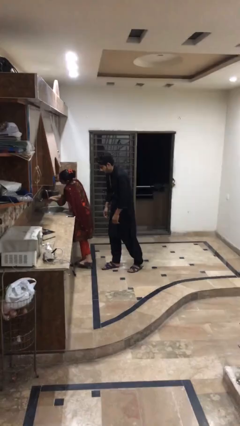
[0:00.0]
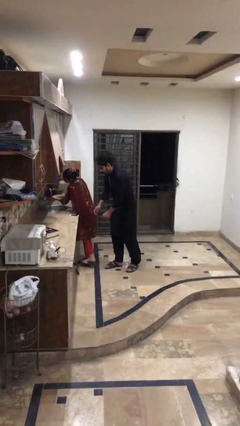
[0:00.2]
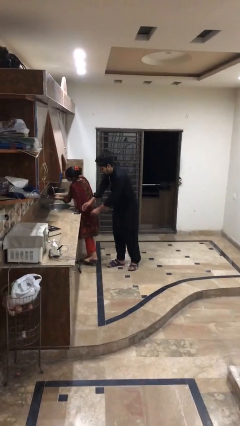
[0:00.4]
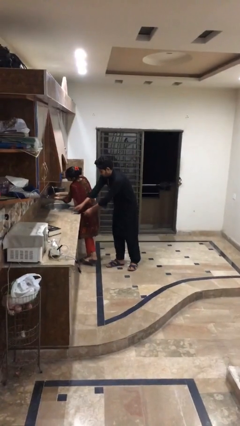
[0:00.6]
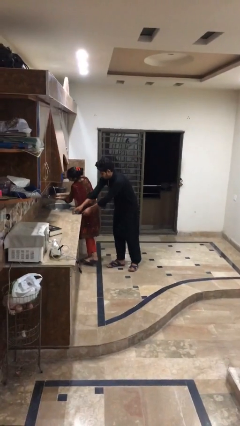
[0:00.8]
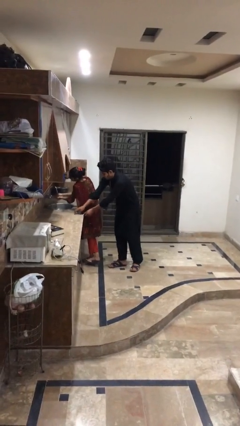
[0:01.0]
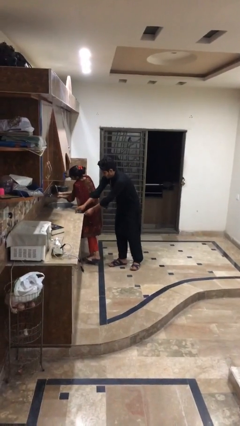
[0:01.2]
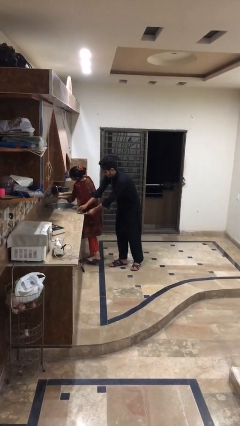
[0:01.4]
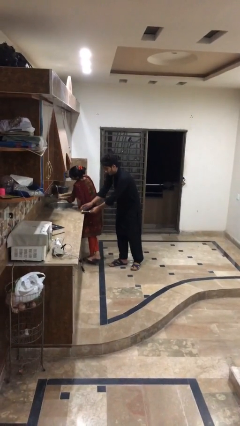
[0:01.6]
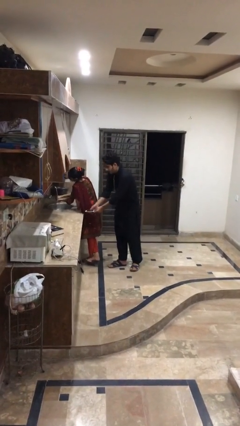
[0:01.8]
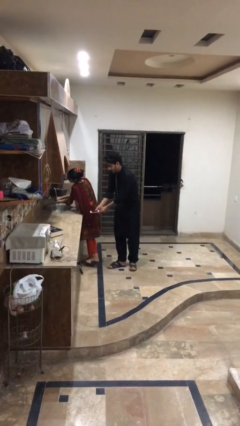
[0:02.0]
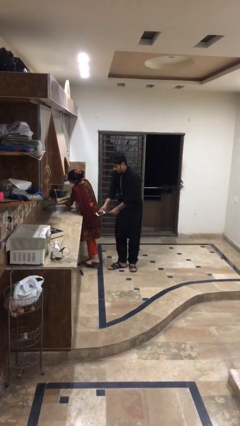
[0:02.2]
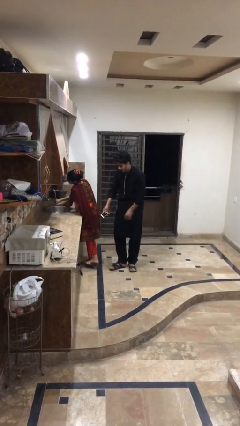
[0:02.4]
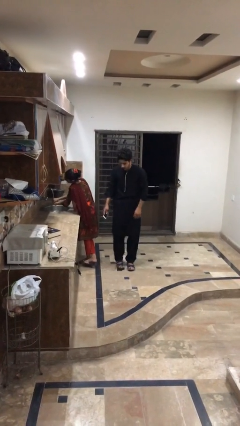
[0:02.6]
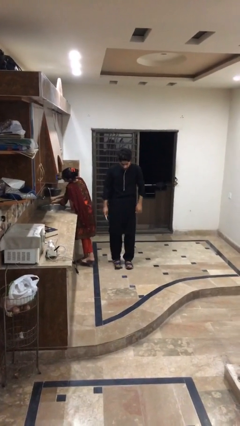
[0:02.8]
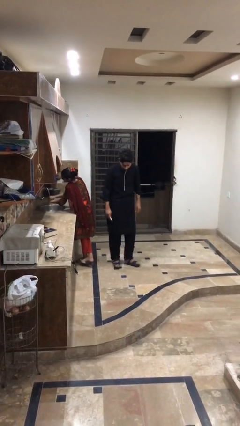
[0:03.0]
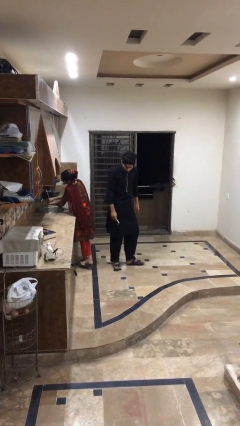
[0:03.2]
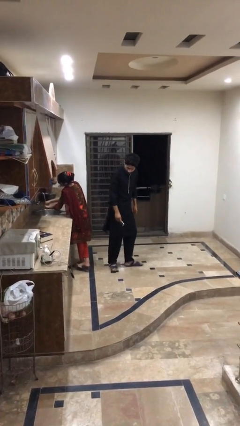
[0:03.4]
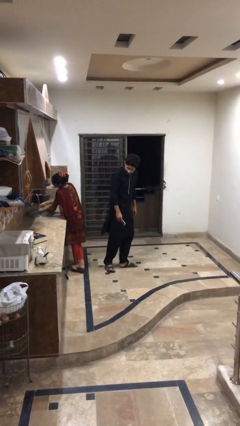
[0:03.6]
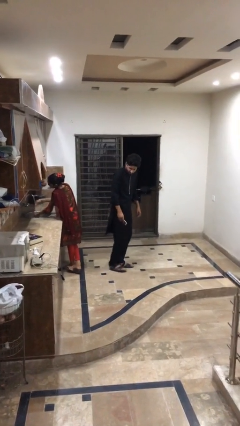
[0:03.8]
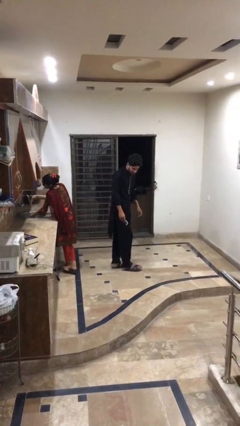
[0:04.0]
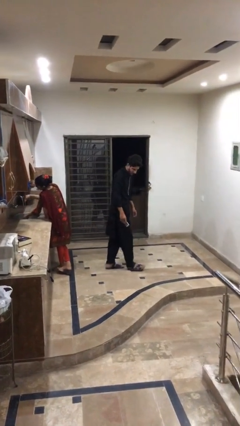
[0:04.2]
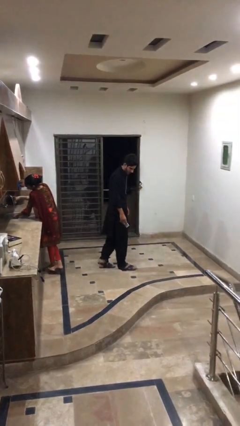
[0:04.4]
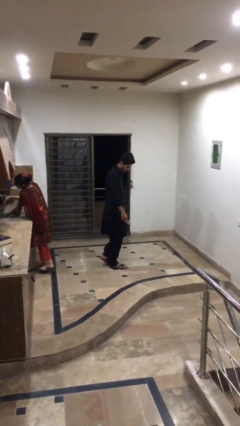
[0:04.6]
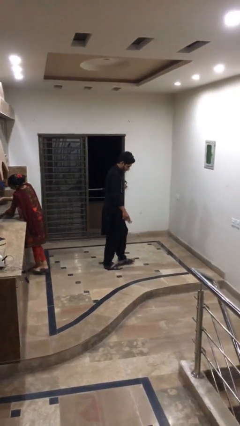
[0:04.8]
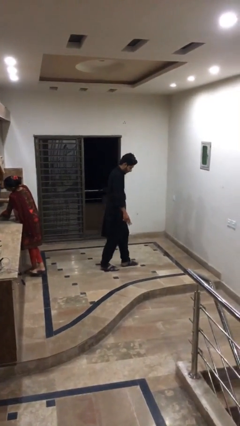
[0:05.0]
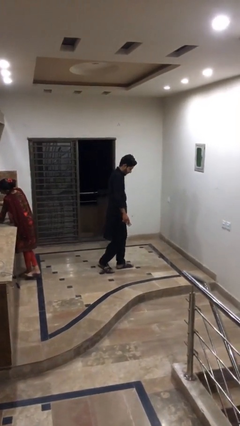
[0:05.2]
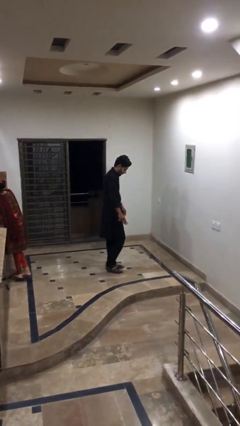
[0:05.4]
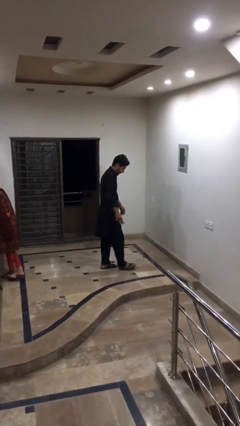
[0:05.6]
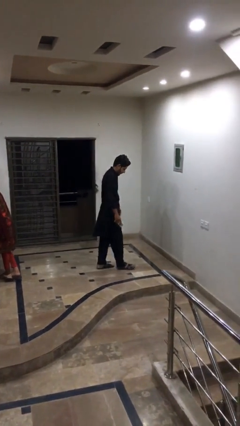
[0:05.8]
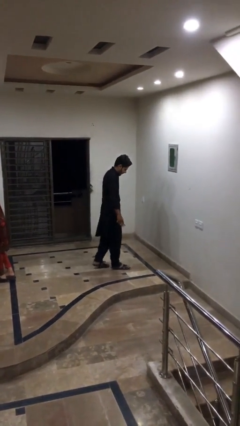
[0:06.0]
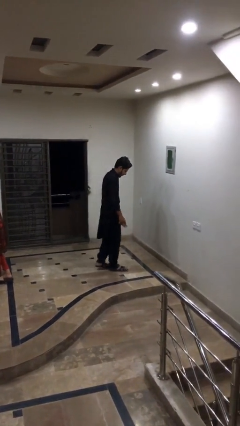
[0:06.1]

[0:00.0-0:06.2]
person steals object from person

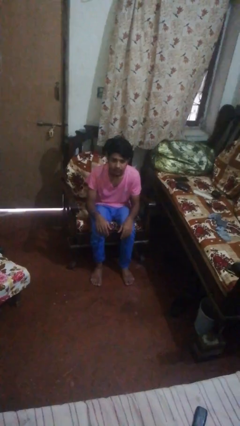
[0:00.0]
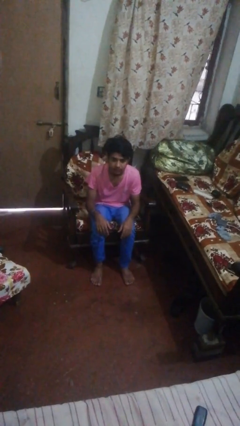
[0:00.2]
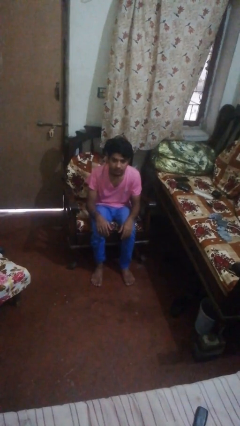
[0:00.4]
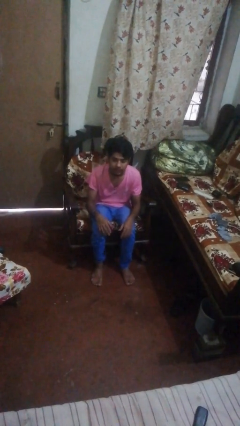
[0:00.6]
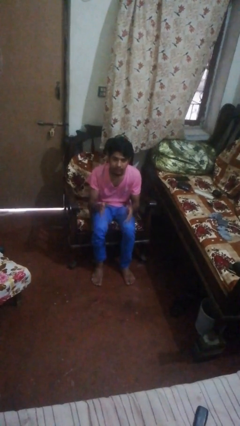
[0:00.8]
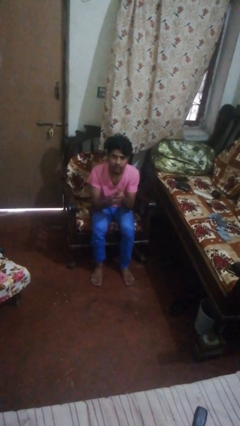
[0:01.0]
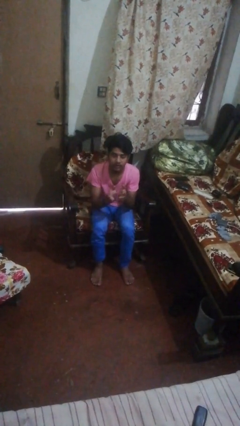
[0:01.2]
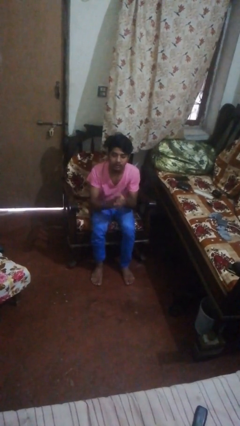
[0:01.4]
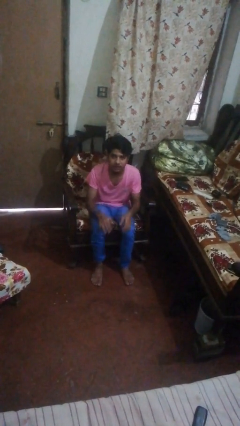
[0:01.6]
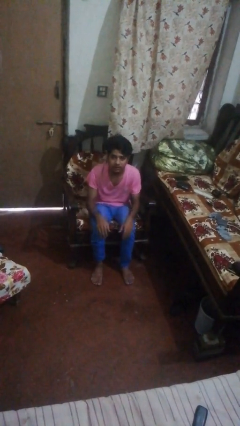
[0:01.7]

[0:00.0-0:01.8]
person claps hands

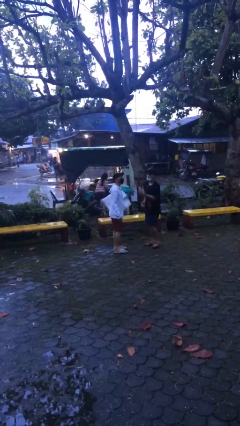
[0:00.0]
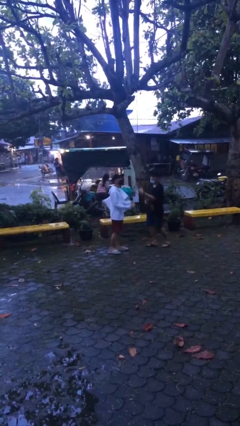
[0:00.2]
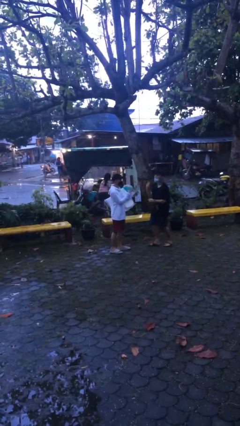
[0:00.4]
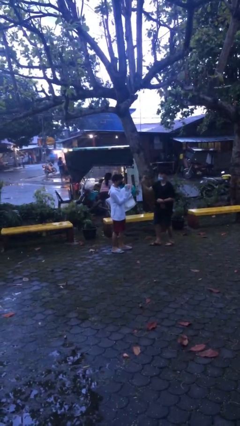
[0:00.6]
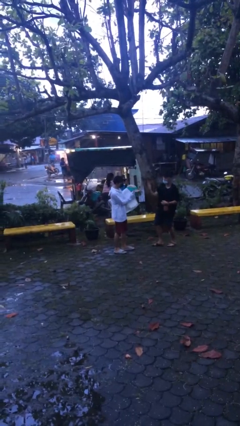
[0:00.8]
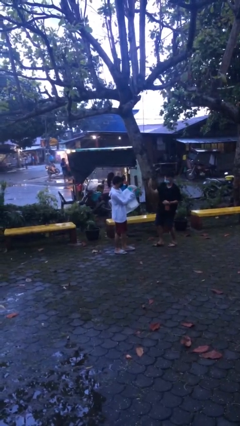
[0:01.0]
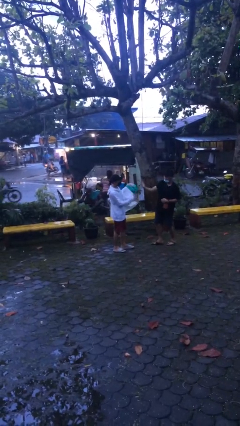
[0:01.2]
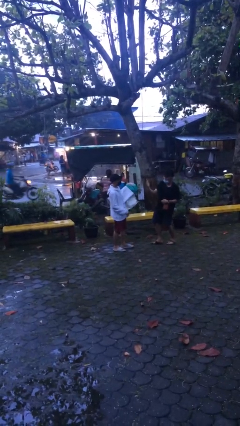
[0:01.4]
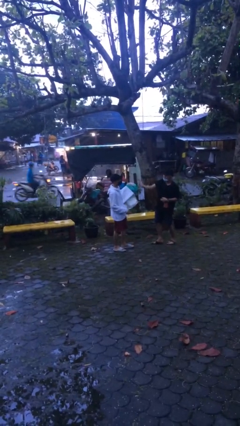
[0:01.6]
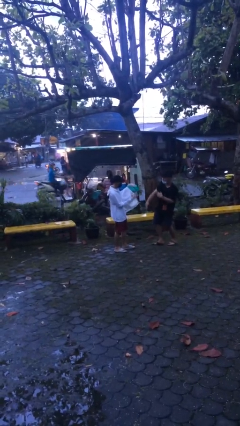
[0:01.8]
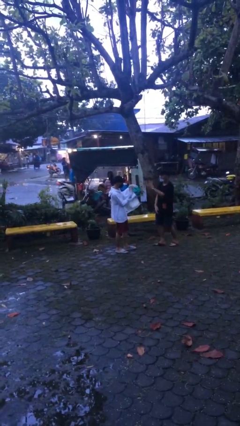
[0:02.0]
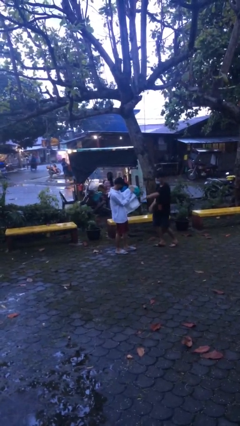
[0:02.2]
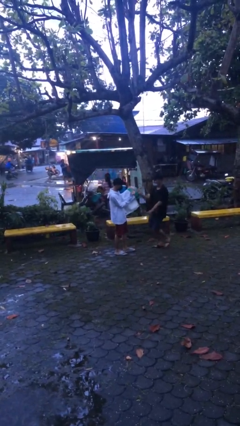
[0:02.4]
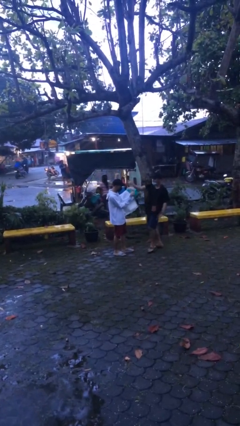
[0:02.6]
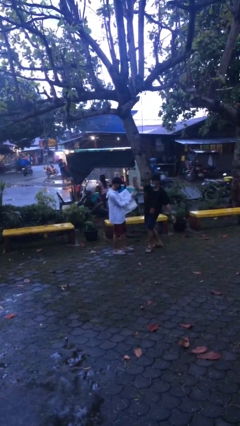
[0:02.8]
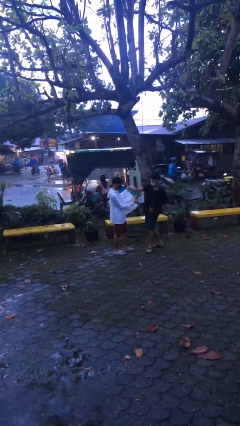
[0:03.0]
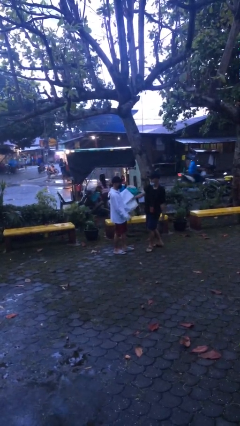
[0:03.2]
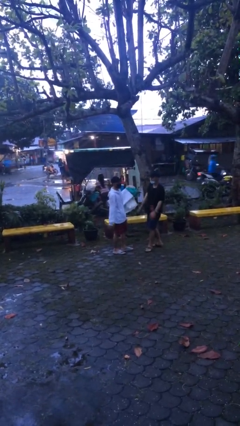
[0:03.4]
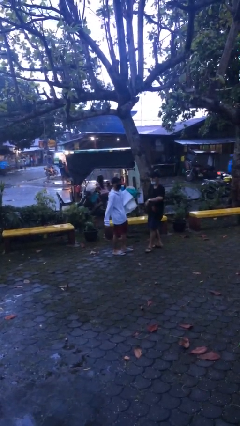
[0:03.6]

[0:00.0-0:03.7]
person talks to person

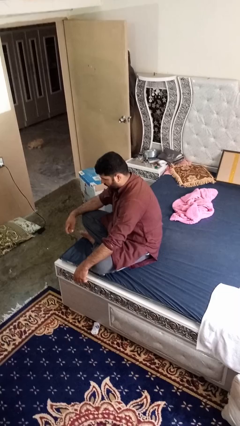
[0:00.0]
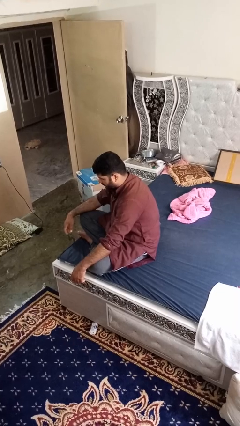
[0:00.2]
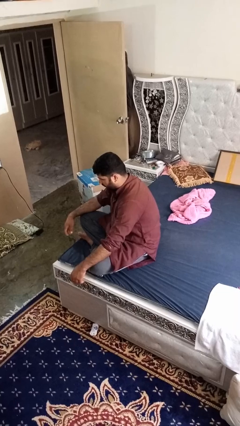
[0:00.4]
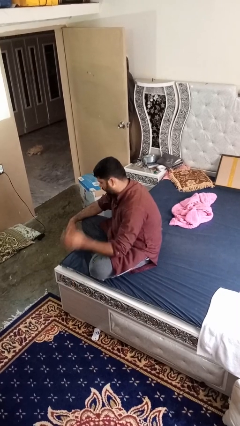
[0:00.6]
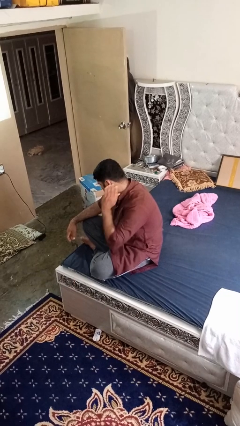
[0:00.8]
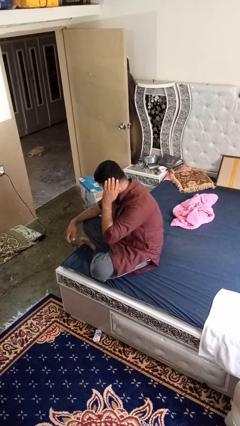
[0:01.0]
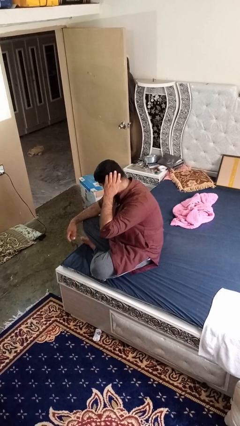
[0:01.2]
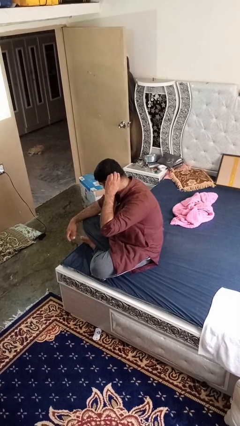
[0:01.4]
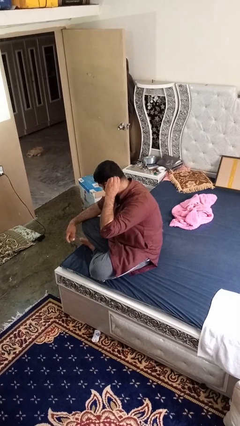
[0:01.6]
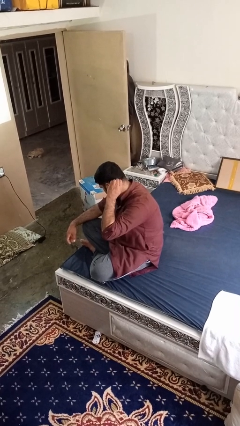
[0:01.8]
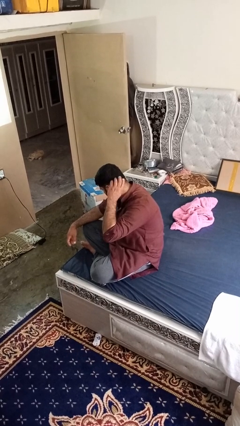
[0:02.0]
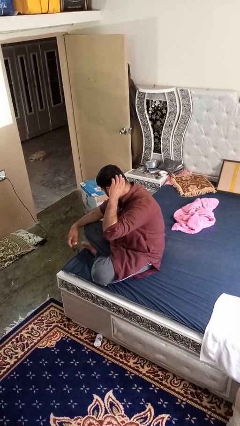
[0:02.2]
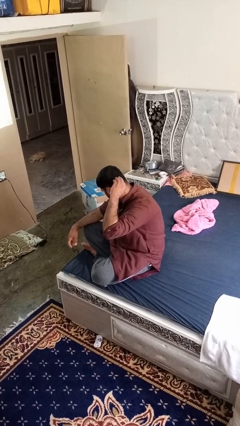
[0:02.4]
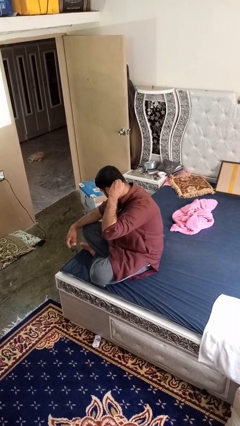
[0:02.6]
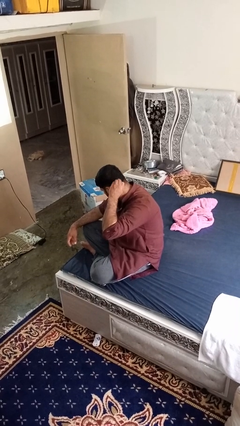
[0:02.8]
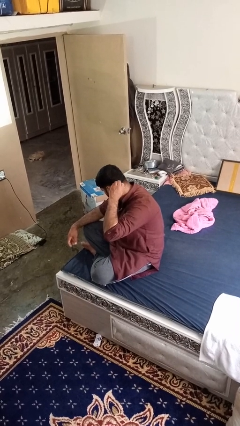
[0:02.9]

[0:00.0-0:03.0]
person strokes hair

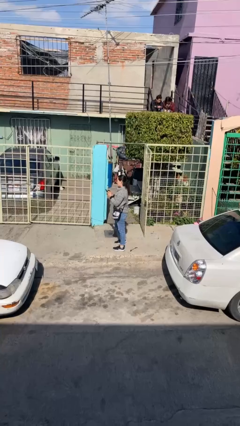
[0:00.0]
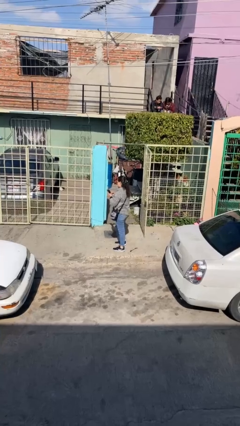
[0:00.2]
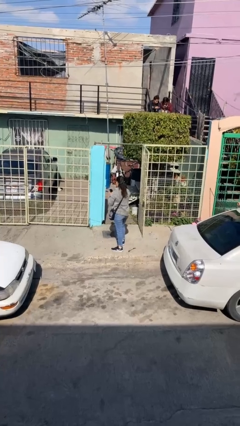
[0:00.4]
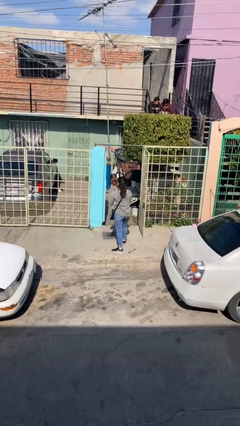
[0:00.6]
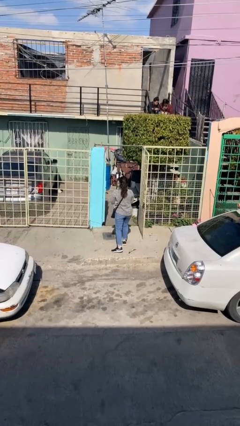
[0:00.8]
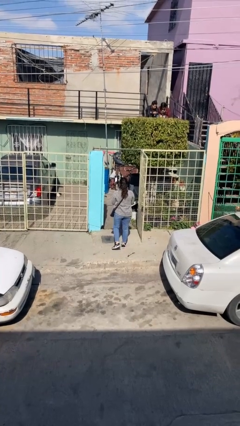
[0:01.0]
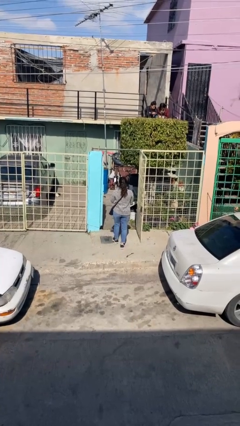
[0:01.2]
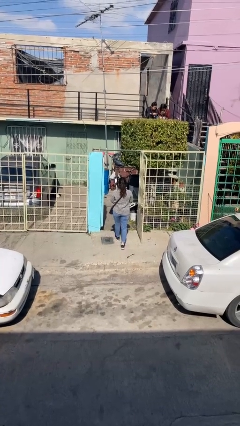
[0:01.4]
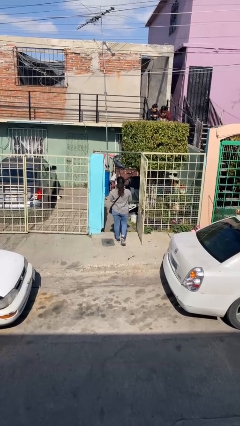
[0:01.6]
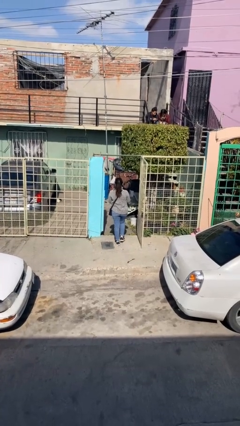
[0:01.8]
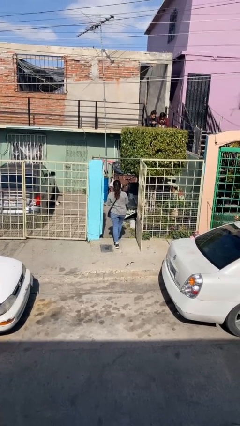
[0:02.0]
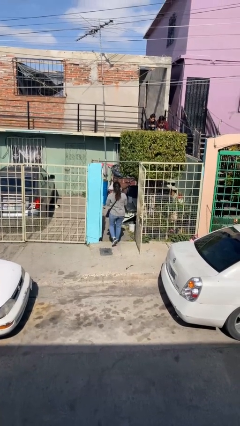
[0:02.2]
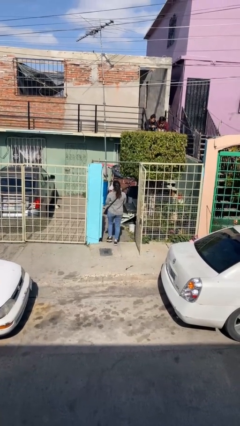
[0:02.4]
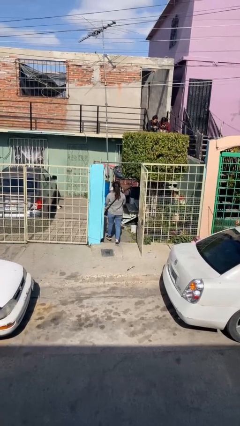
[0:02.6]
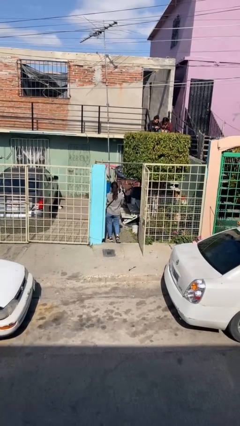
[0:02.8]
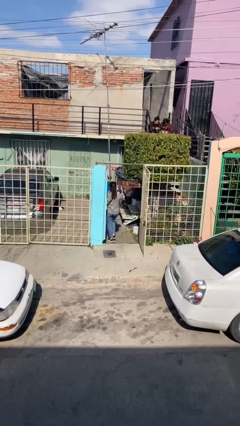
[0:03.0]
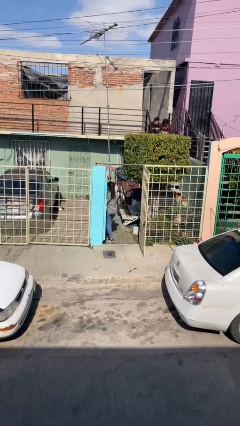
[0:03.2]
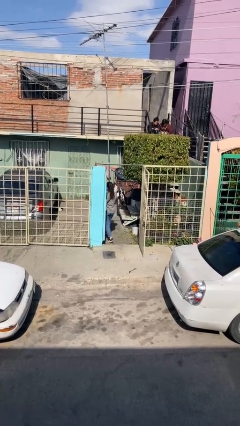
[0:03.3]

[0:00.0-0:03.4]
person exits scene through structure
